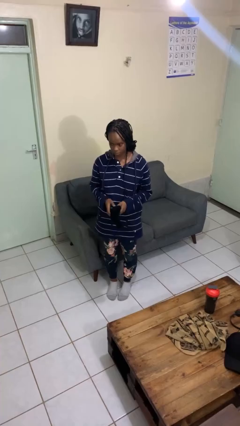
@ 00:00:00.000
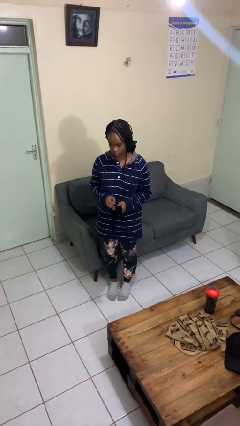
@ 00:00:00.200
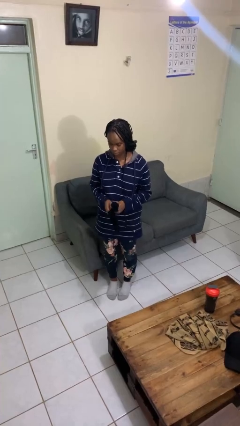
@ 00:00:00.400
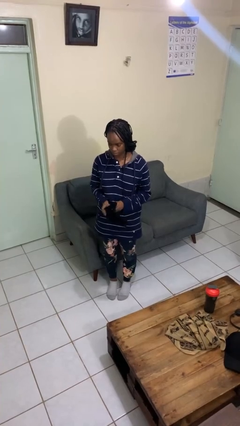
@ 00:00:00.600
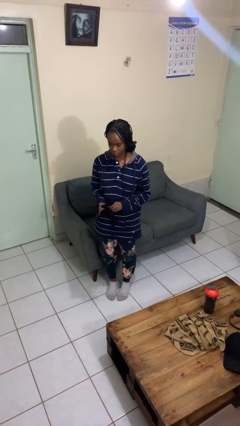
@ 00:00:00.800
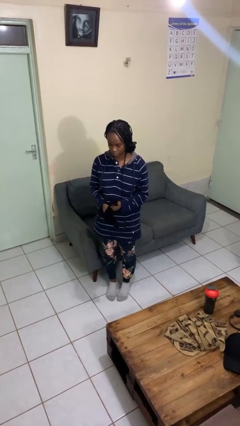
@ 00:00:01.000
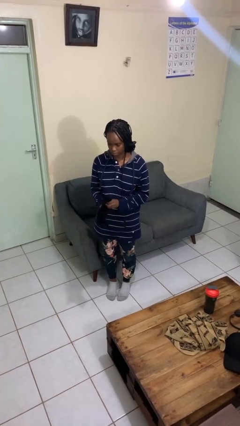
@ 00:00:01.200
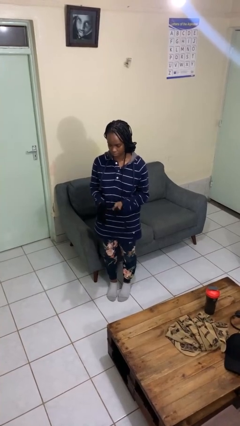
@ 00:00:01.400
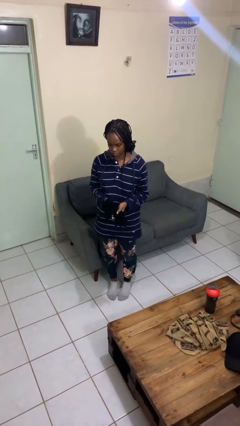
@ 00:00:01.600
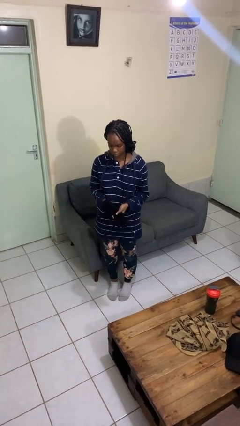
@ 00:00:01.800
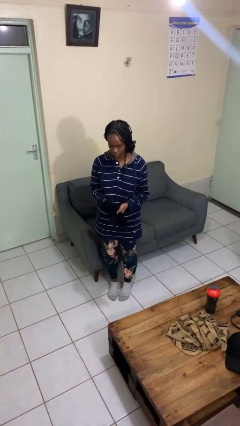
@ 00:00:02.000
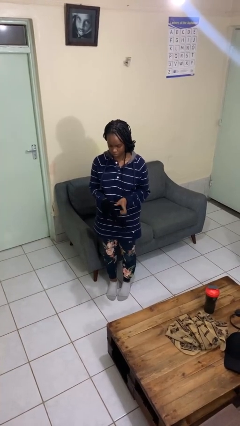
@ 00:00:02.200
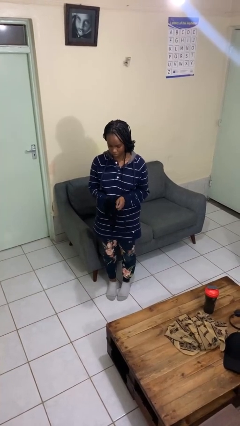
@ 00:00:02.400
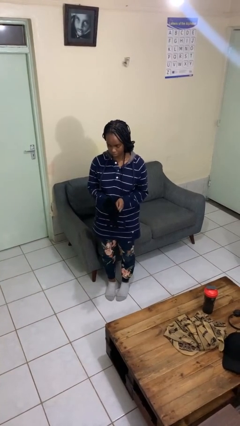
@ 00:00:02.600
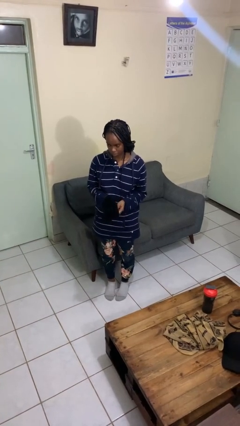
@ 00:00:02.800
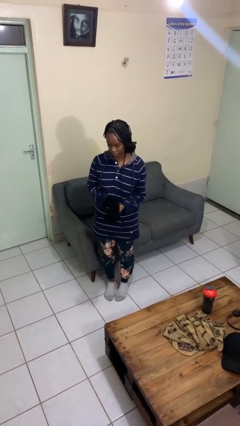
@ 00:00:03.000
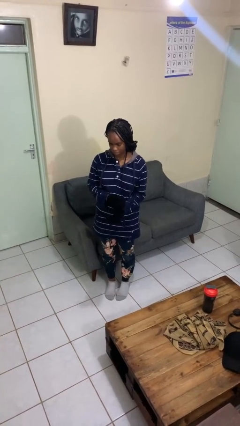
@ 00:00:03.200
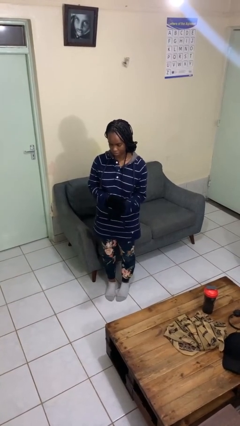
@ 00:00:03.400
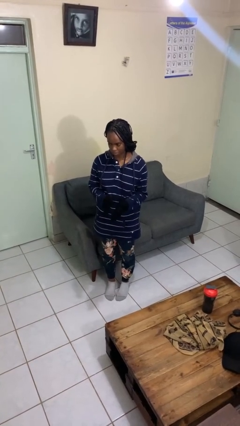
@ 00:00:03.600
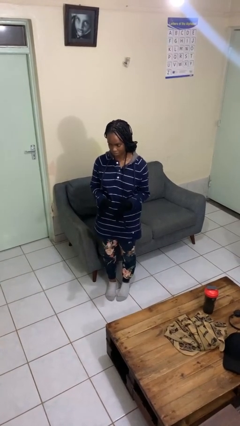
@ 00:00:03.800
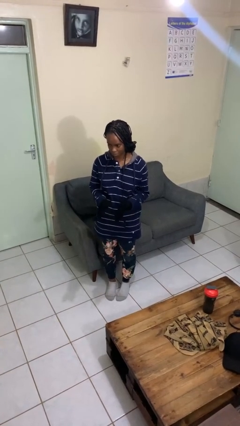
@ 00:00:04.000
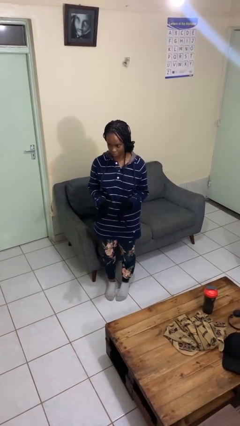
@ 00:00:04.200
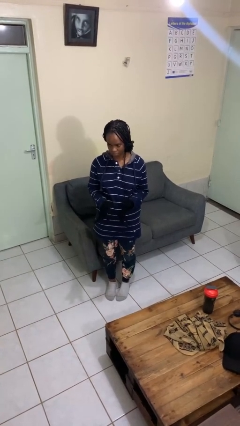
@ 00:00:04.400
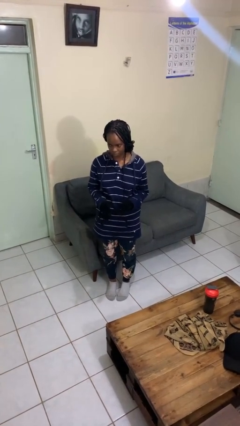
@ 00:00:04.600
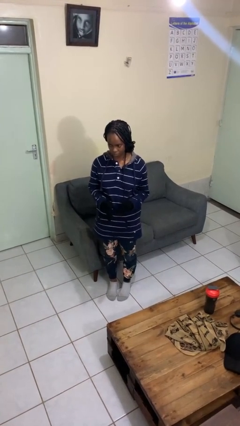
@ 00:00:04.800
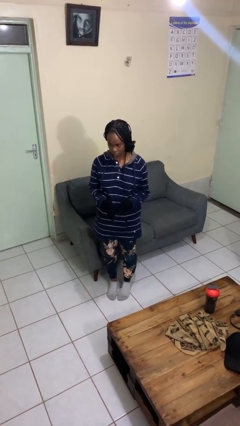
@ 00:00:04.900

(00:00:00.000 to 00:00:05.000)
person puts on gloves

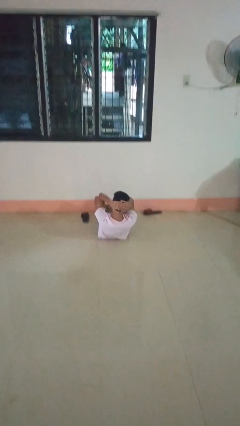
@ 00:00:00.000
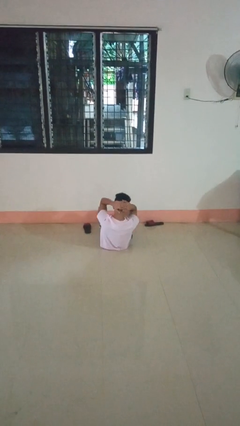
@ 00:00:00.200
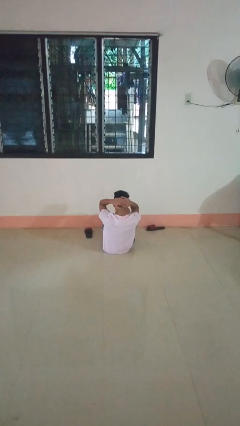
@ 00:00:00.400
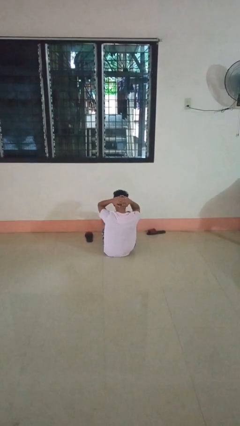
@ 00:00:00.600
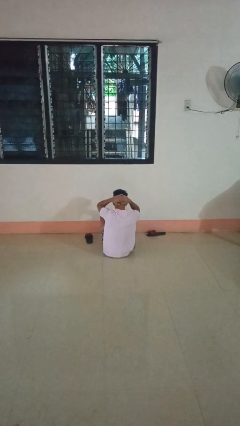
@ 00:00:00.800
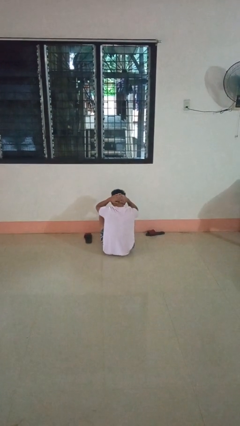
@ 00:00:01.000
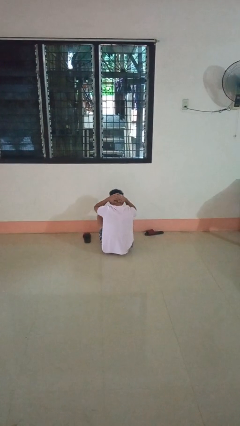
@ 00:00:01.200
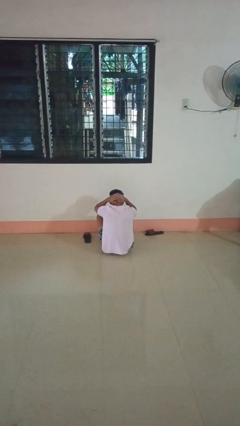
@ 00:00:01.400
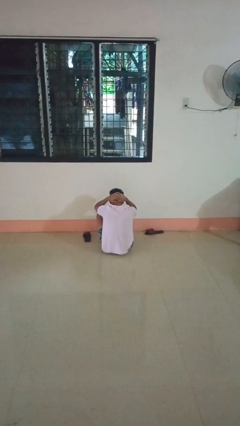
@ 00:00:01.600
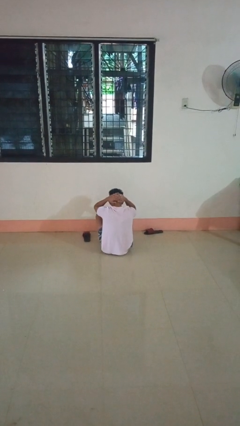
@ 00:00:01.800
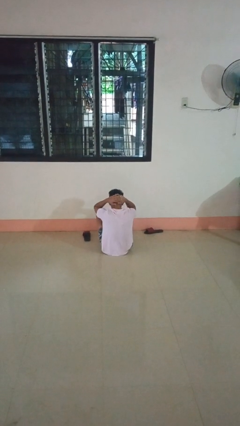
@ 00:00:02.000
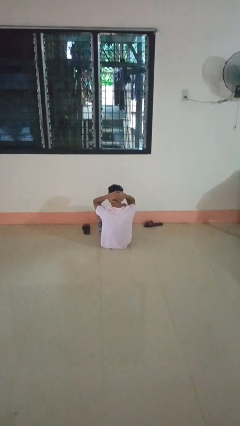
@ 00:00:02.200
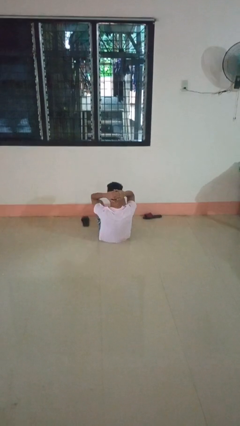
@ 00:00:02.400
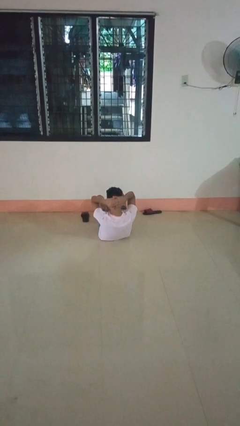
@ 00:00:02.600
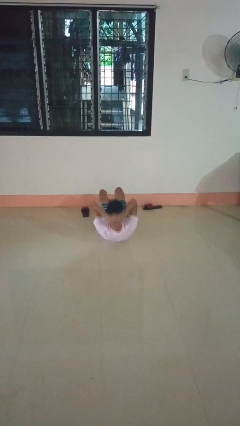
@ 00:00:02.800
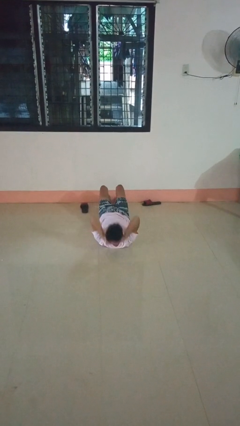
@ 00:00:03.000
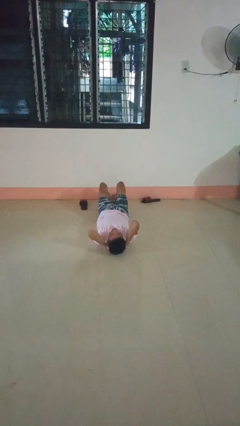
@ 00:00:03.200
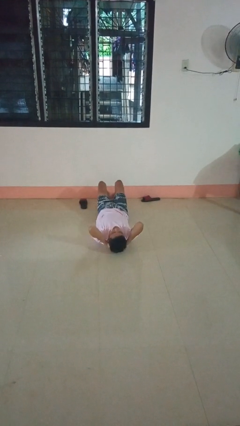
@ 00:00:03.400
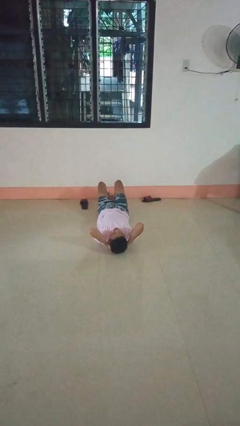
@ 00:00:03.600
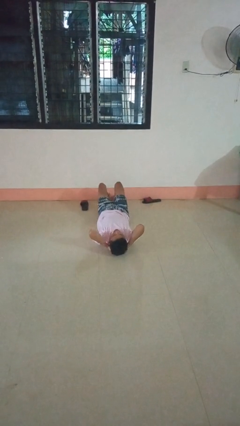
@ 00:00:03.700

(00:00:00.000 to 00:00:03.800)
person exercises with situp

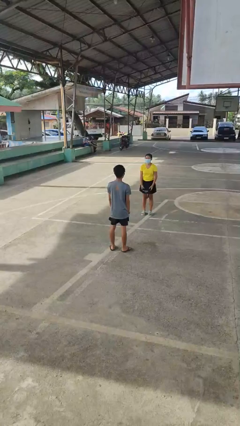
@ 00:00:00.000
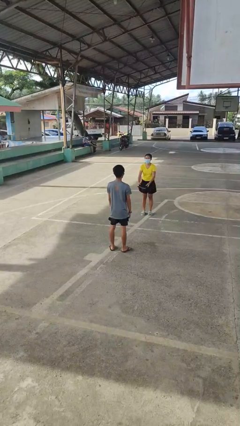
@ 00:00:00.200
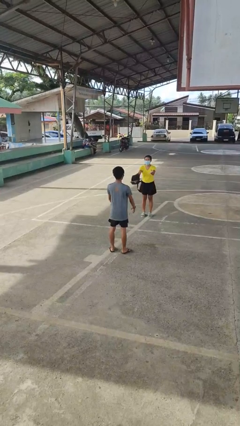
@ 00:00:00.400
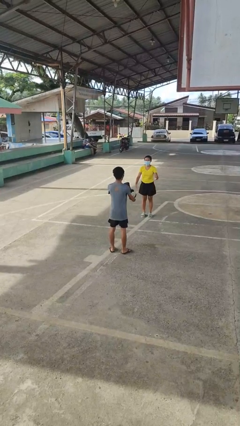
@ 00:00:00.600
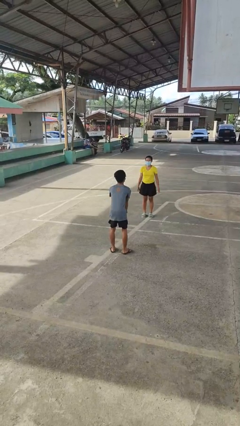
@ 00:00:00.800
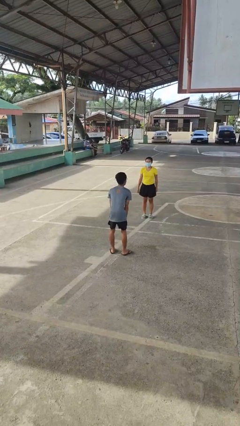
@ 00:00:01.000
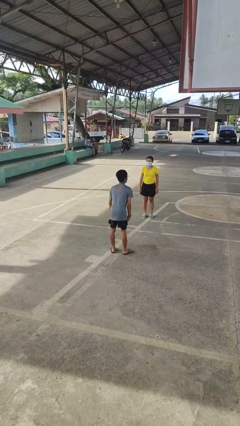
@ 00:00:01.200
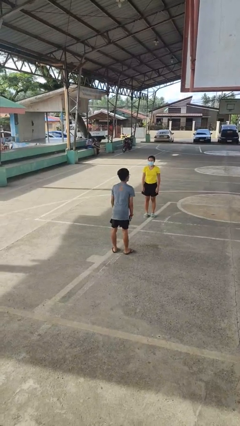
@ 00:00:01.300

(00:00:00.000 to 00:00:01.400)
person catches object from person

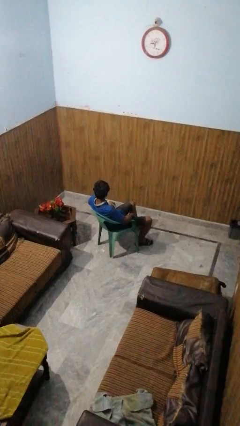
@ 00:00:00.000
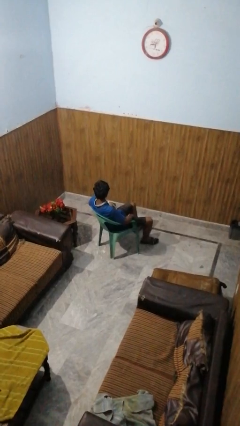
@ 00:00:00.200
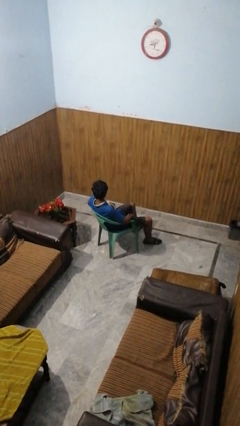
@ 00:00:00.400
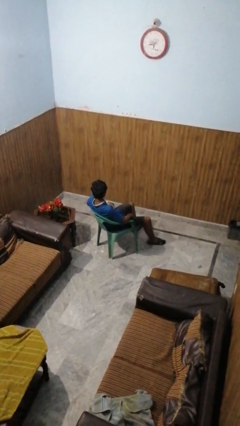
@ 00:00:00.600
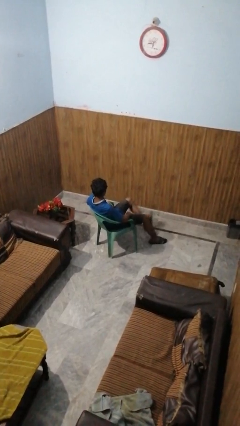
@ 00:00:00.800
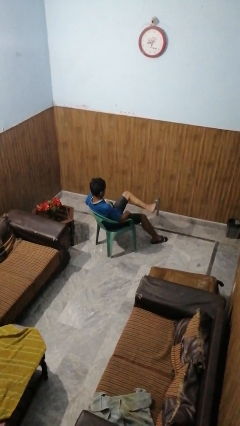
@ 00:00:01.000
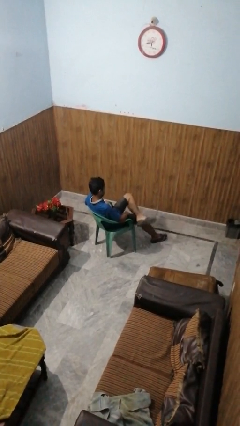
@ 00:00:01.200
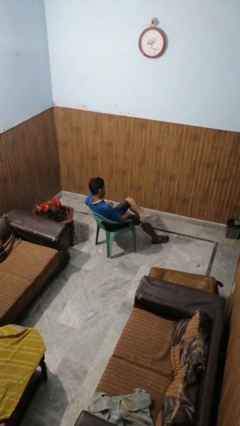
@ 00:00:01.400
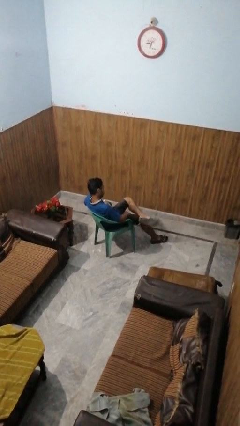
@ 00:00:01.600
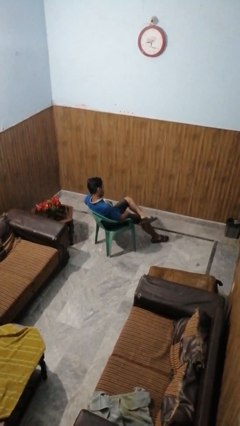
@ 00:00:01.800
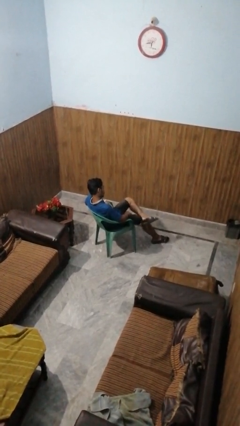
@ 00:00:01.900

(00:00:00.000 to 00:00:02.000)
person crosses legs

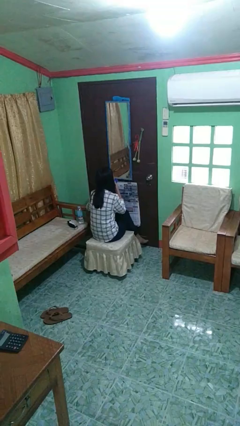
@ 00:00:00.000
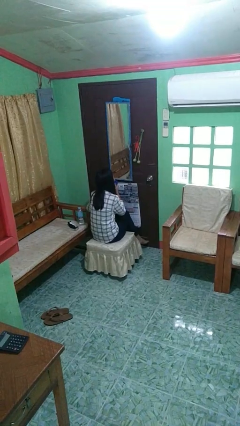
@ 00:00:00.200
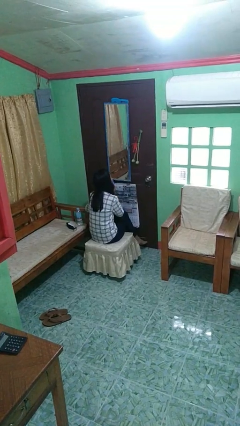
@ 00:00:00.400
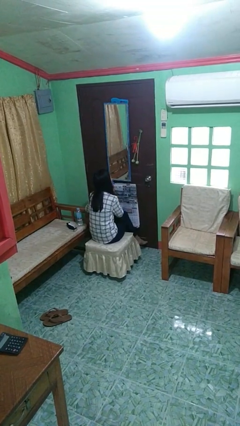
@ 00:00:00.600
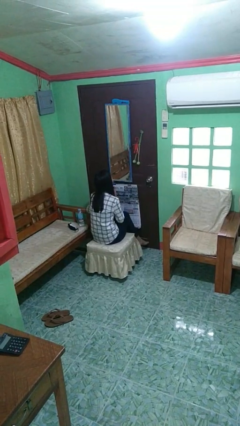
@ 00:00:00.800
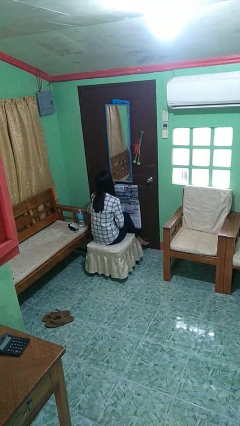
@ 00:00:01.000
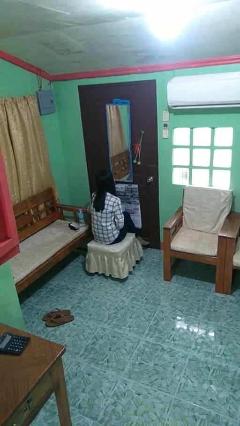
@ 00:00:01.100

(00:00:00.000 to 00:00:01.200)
person wipes mouth with napkin

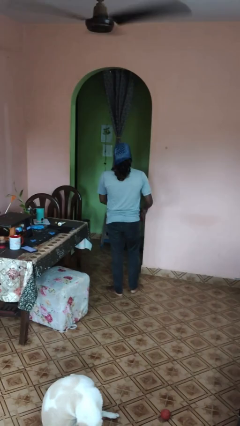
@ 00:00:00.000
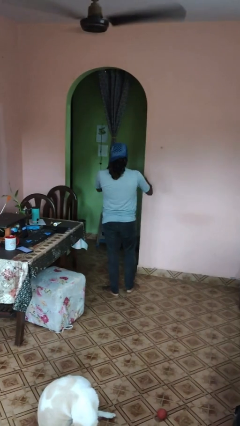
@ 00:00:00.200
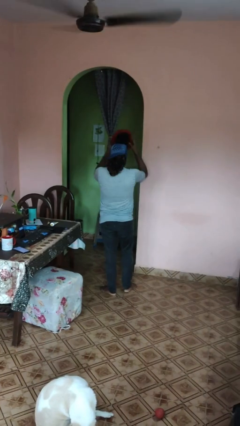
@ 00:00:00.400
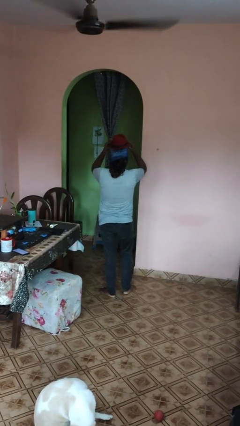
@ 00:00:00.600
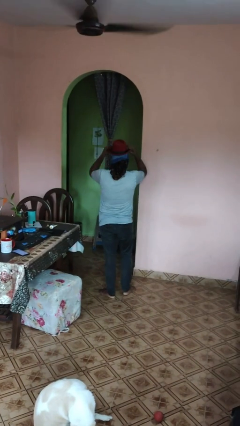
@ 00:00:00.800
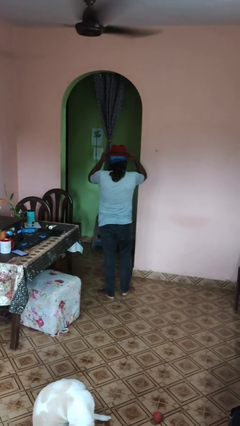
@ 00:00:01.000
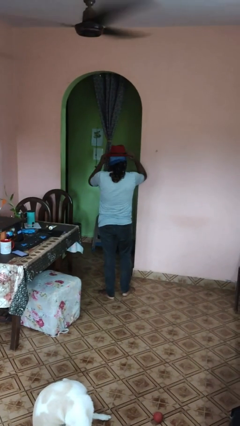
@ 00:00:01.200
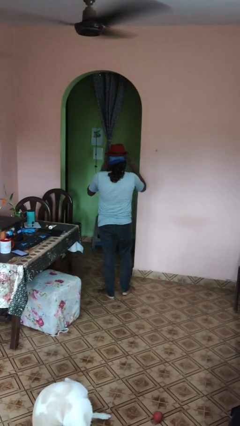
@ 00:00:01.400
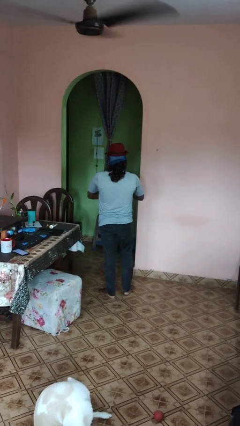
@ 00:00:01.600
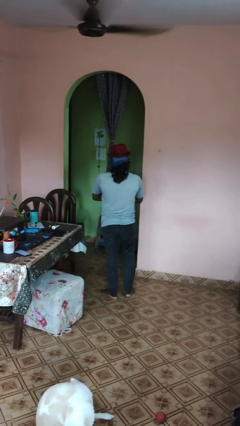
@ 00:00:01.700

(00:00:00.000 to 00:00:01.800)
person puts on hat

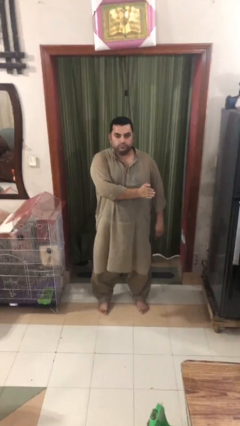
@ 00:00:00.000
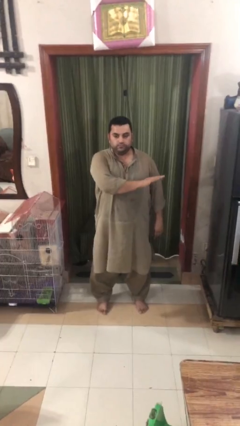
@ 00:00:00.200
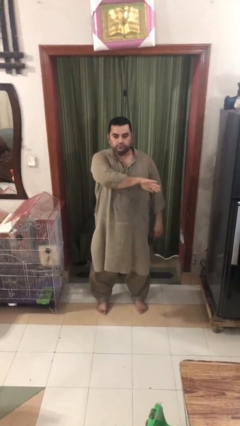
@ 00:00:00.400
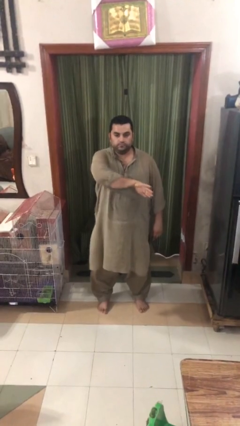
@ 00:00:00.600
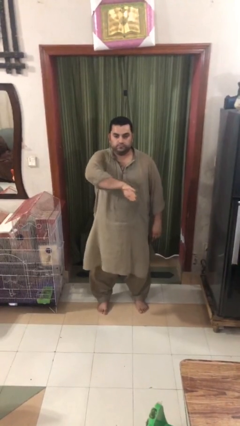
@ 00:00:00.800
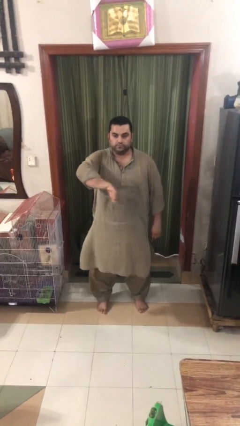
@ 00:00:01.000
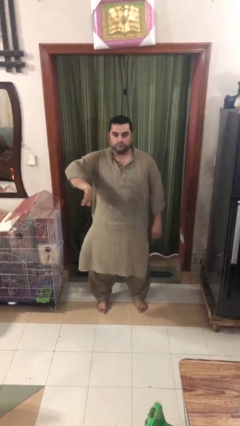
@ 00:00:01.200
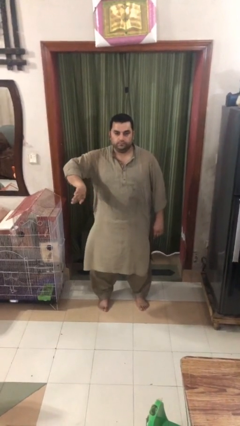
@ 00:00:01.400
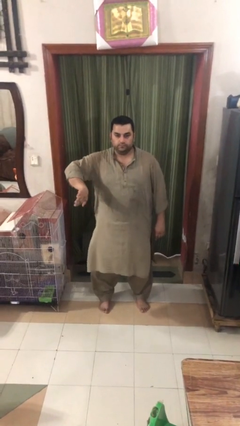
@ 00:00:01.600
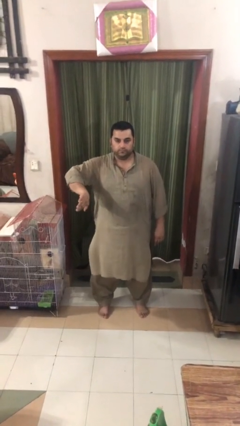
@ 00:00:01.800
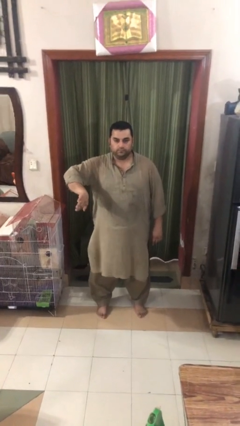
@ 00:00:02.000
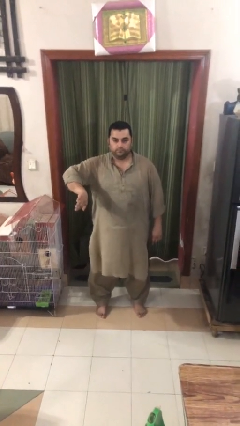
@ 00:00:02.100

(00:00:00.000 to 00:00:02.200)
person gestures swipe right
